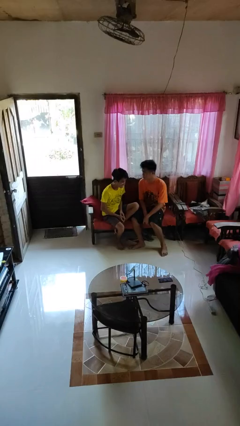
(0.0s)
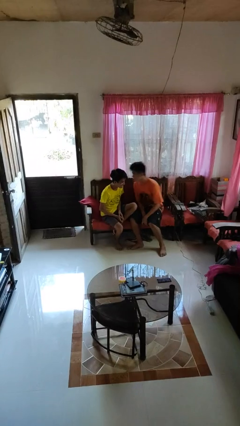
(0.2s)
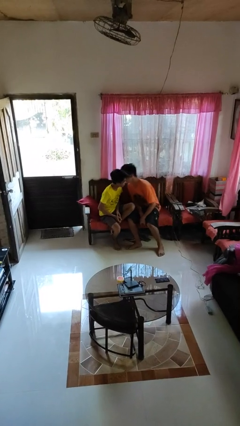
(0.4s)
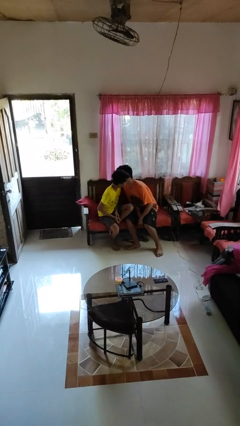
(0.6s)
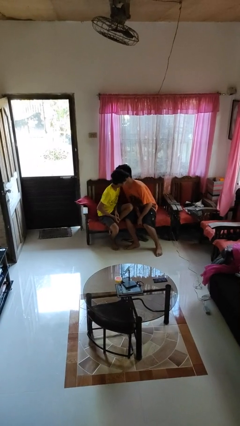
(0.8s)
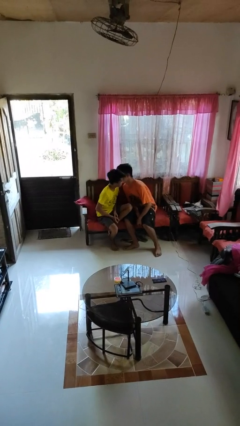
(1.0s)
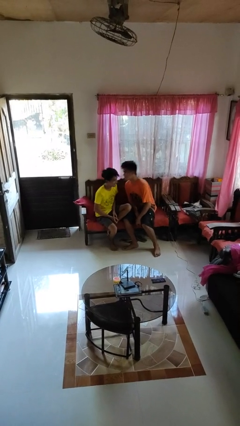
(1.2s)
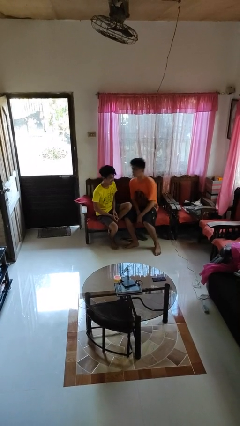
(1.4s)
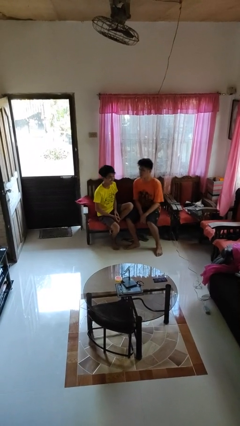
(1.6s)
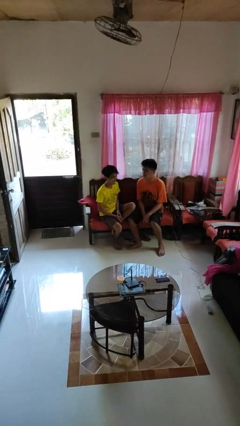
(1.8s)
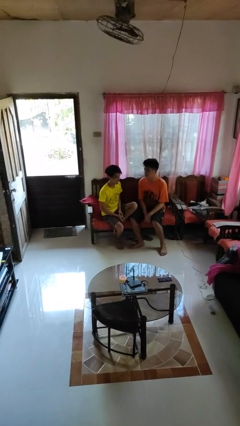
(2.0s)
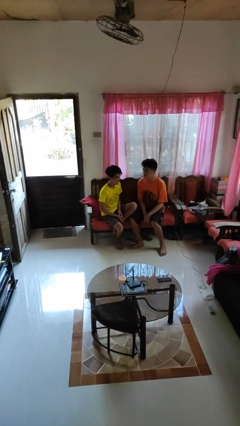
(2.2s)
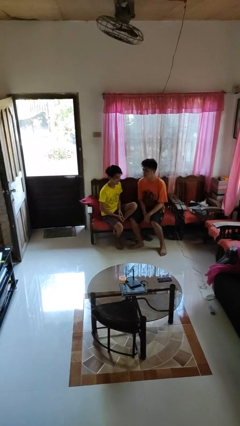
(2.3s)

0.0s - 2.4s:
person kisses cheek of person

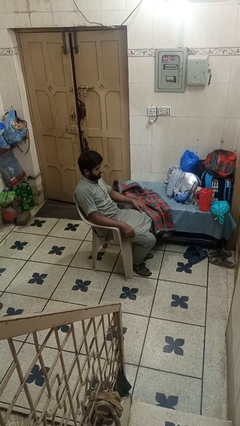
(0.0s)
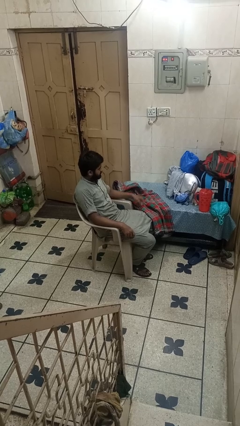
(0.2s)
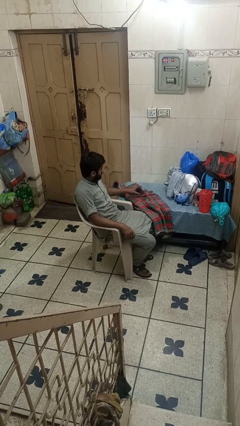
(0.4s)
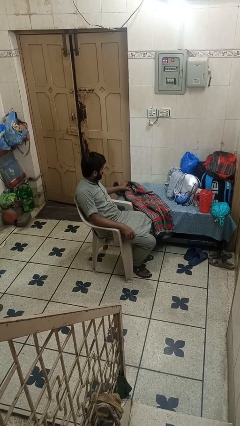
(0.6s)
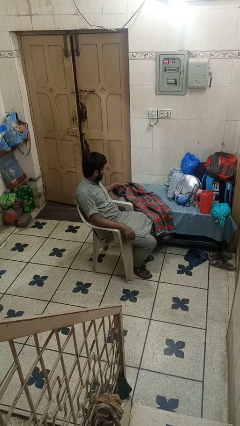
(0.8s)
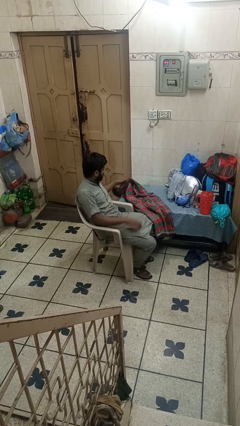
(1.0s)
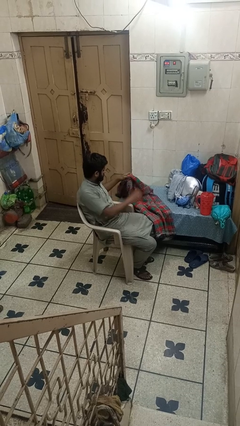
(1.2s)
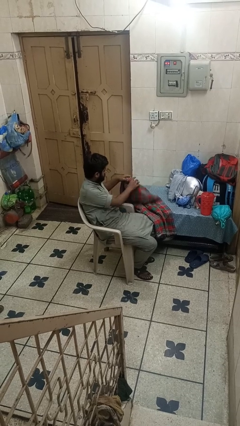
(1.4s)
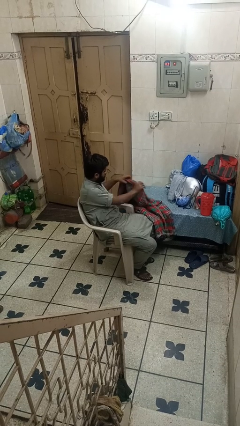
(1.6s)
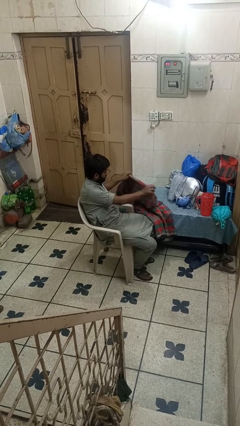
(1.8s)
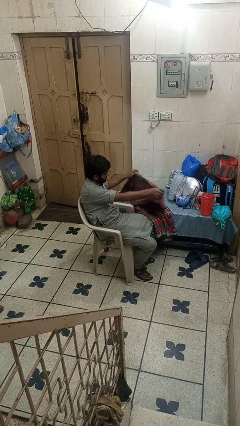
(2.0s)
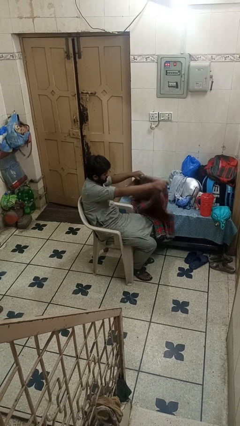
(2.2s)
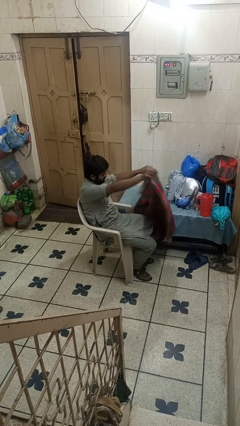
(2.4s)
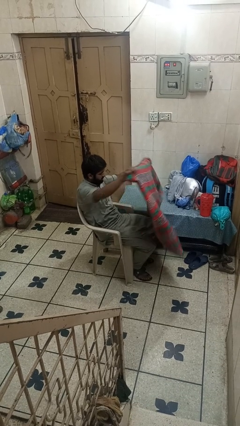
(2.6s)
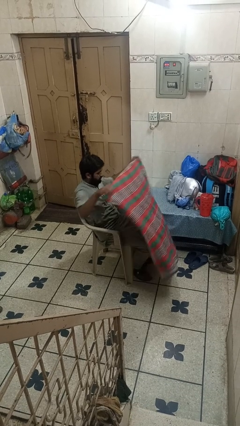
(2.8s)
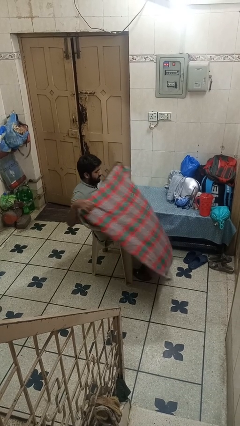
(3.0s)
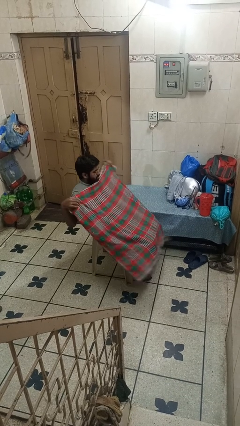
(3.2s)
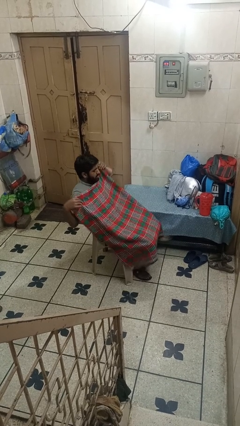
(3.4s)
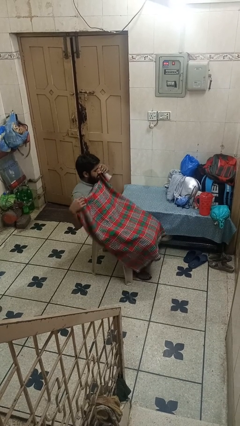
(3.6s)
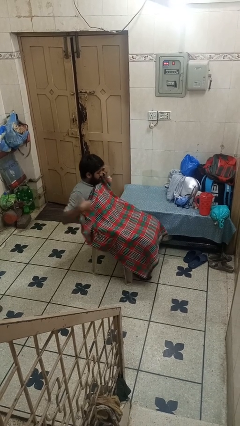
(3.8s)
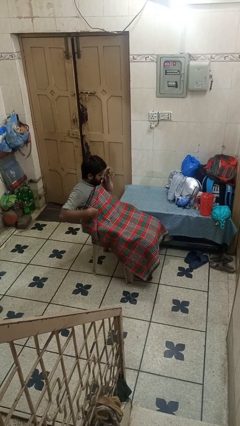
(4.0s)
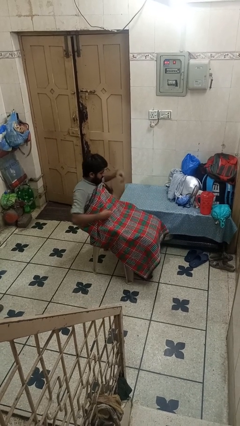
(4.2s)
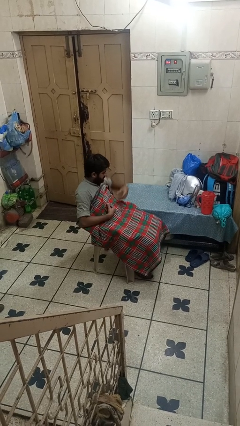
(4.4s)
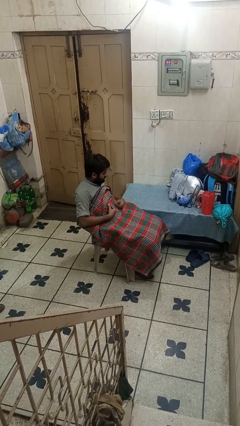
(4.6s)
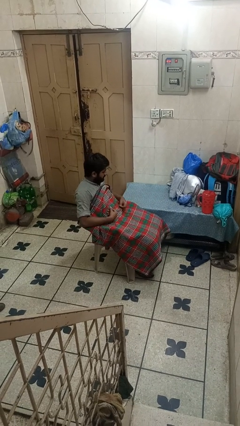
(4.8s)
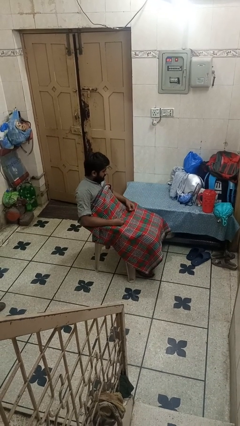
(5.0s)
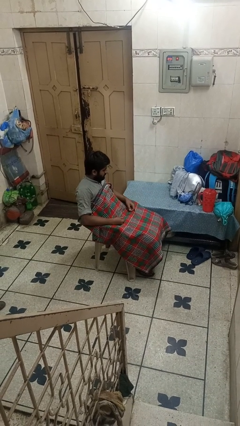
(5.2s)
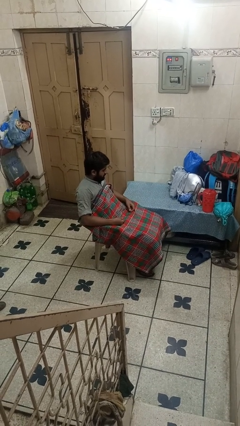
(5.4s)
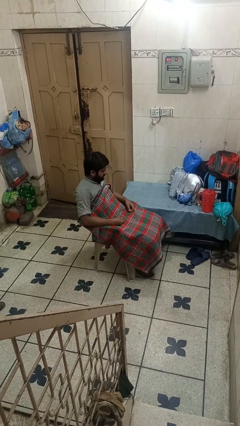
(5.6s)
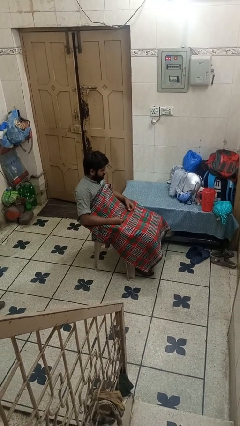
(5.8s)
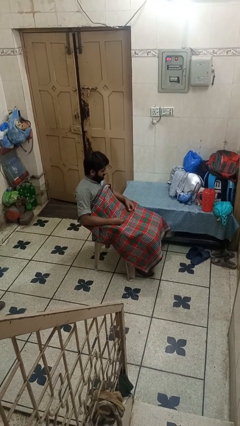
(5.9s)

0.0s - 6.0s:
person covers with blanket

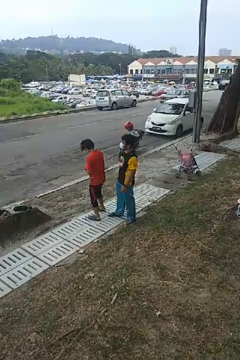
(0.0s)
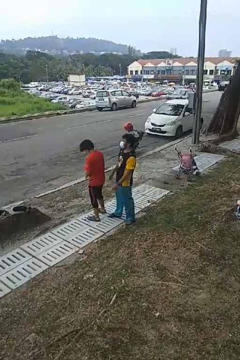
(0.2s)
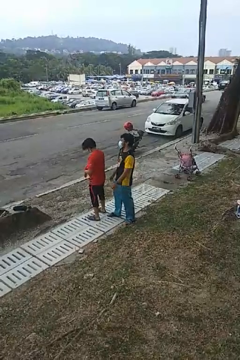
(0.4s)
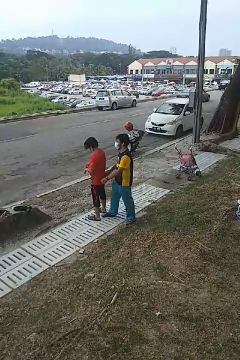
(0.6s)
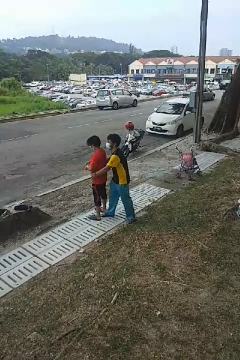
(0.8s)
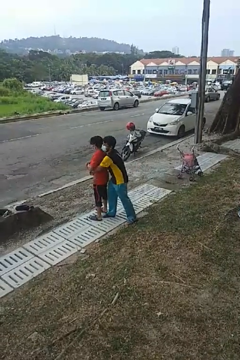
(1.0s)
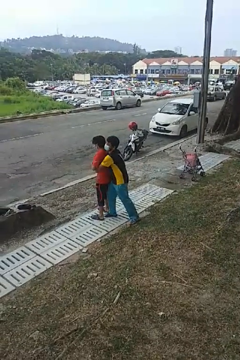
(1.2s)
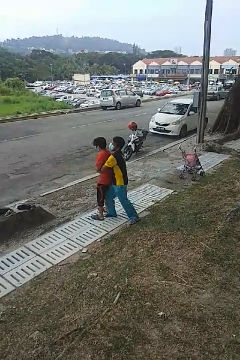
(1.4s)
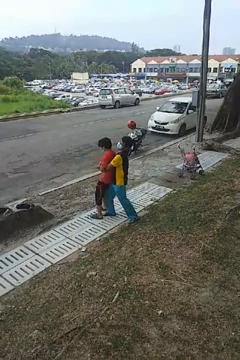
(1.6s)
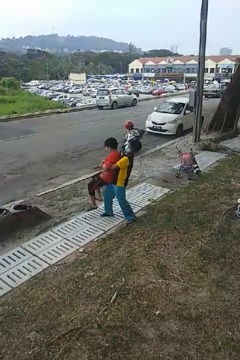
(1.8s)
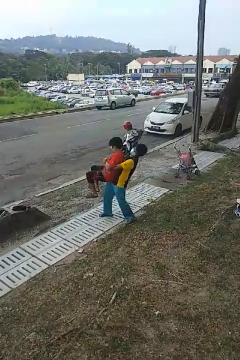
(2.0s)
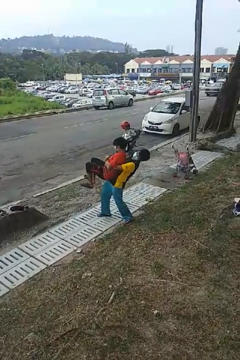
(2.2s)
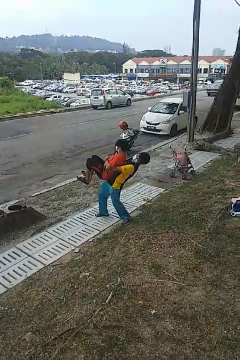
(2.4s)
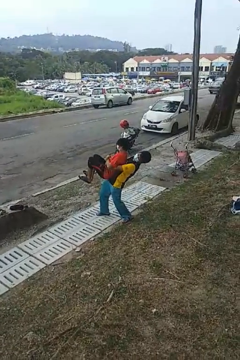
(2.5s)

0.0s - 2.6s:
person picks up person

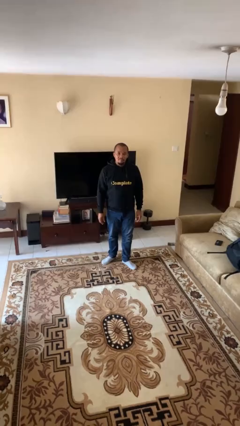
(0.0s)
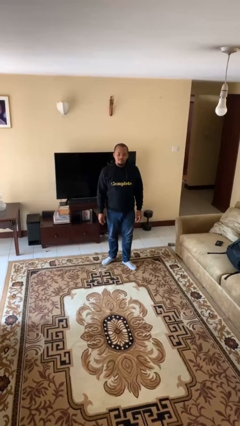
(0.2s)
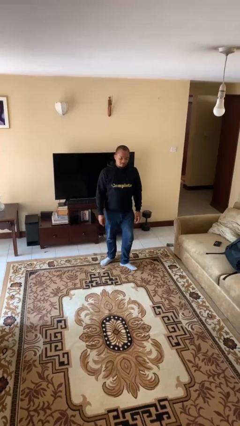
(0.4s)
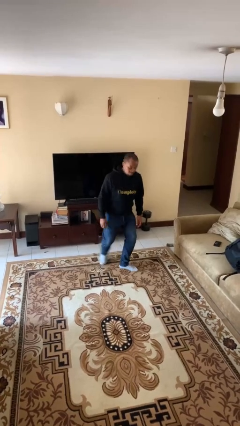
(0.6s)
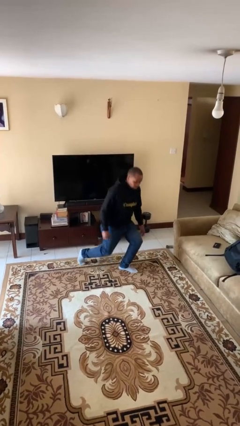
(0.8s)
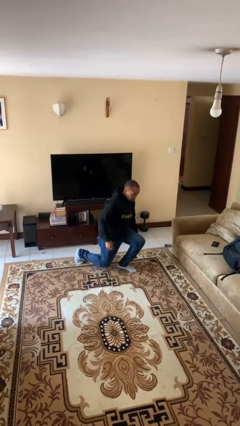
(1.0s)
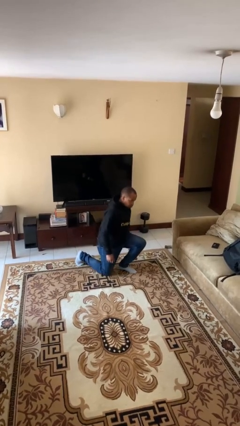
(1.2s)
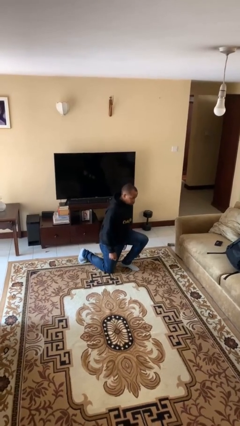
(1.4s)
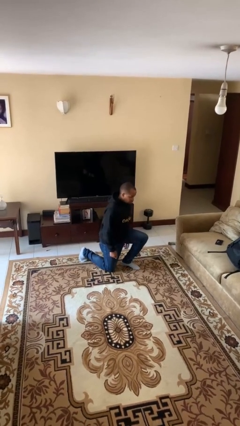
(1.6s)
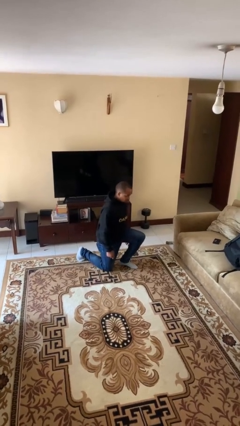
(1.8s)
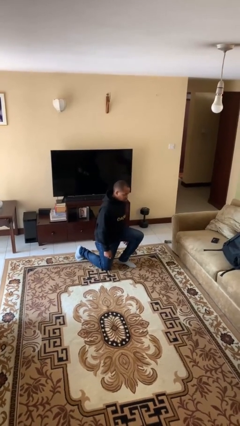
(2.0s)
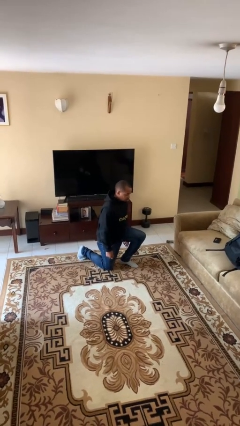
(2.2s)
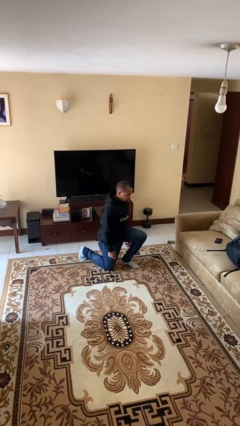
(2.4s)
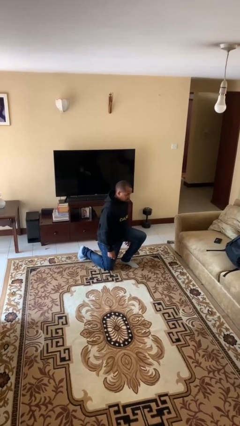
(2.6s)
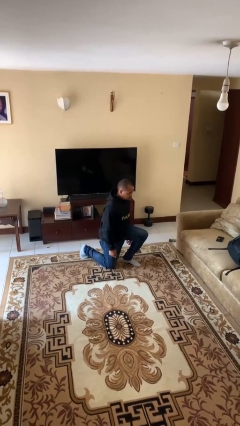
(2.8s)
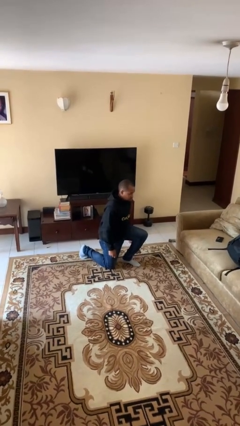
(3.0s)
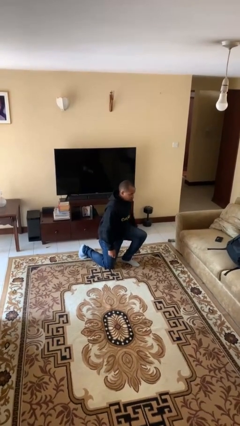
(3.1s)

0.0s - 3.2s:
person kneels

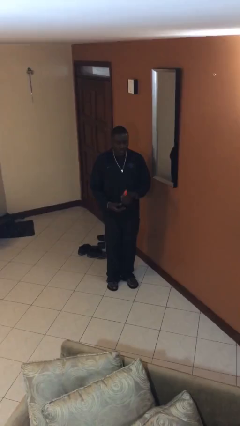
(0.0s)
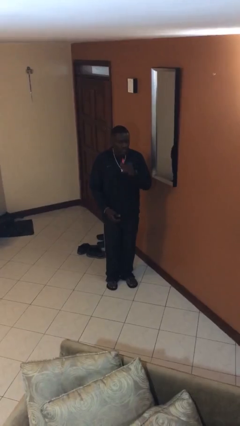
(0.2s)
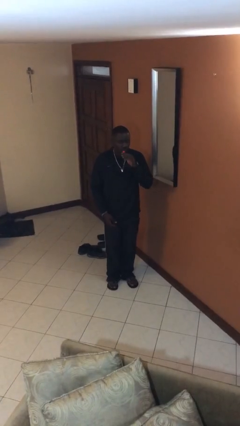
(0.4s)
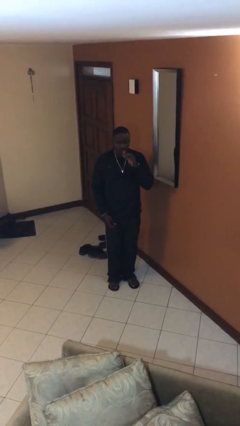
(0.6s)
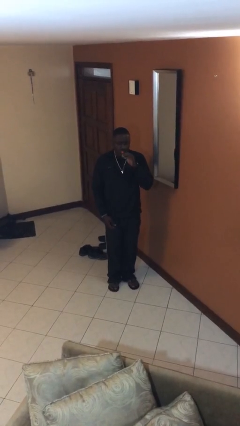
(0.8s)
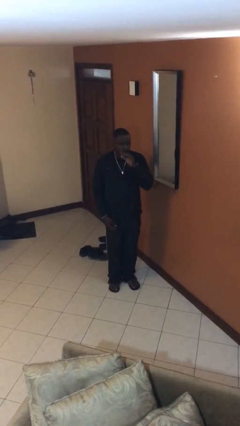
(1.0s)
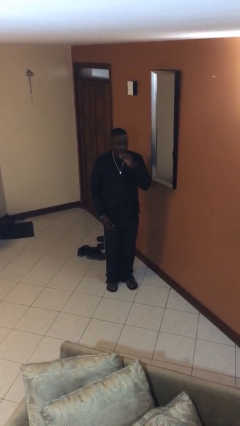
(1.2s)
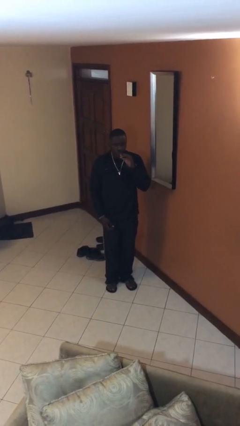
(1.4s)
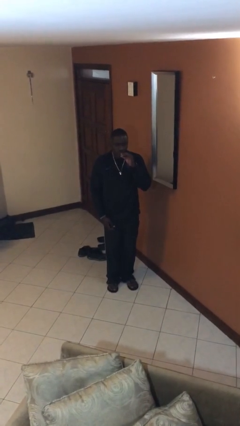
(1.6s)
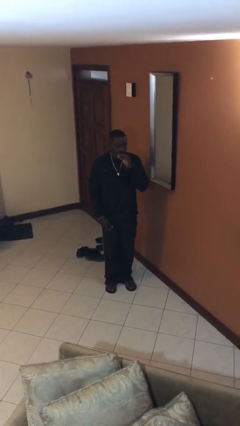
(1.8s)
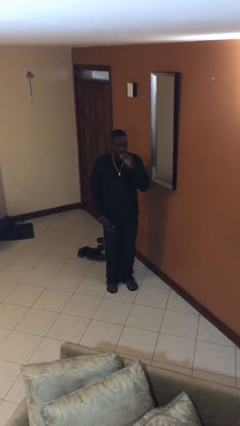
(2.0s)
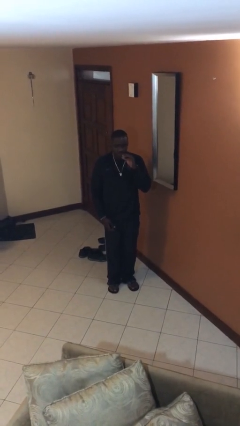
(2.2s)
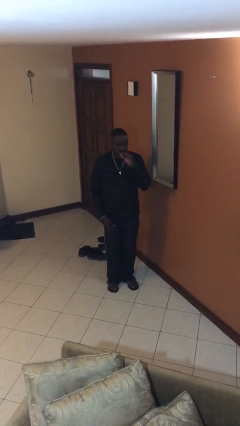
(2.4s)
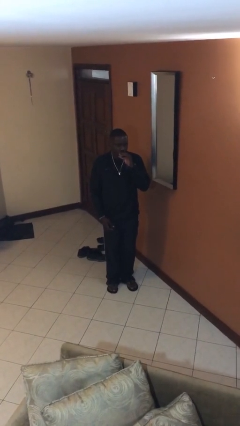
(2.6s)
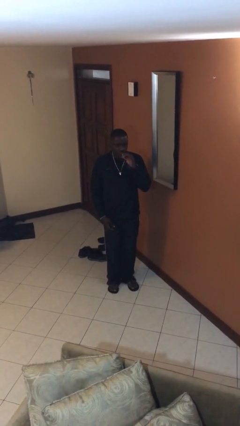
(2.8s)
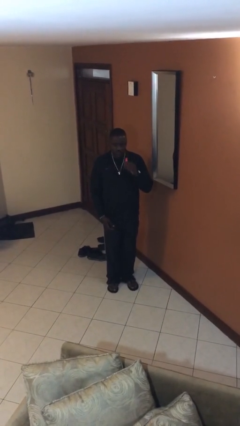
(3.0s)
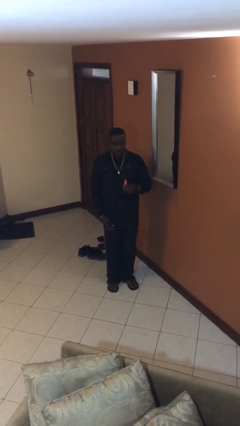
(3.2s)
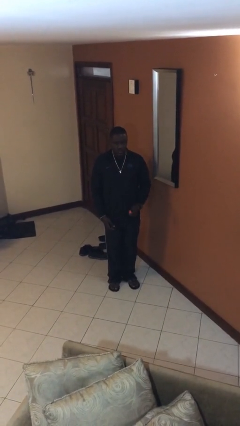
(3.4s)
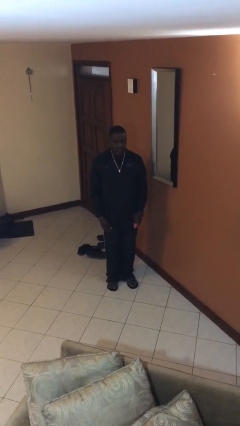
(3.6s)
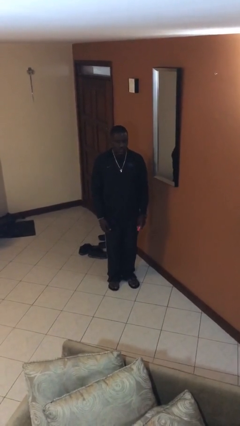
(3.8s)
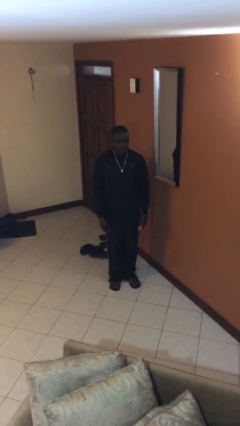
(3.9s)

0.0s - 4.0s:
person applies lip makeup

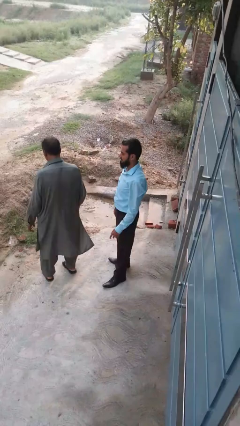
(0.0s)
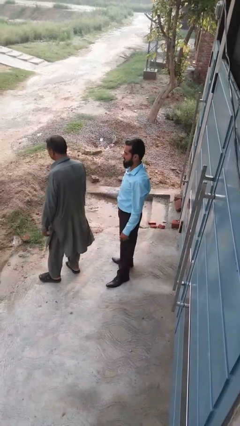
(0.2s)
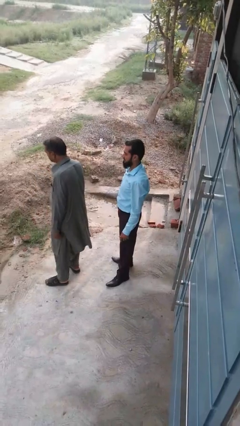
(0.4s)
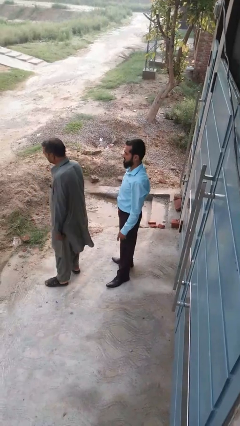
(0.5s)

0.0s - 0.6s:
person grabs person by shoulder
